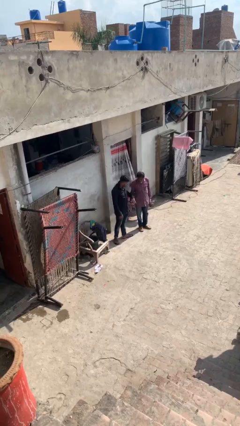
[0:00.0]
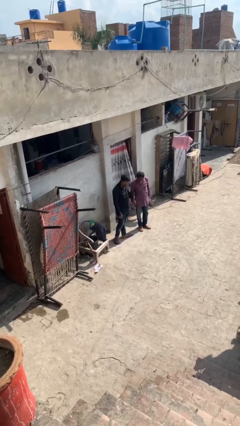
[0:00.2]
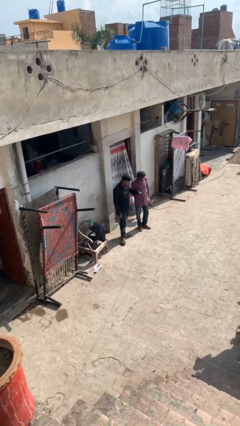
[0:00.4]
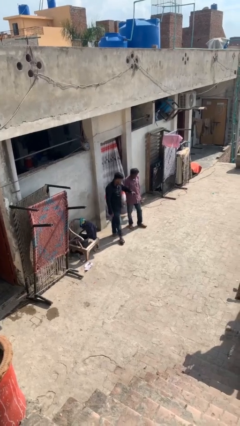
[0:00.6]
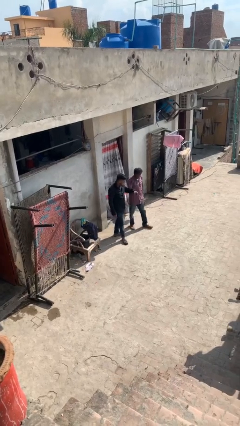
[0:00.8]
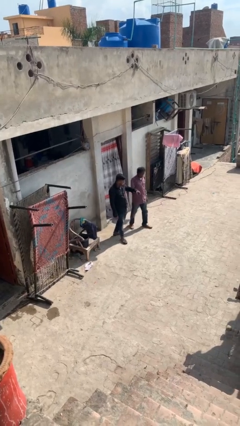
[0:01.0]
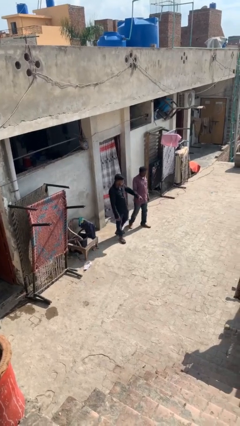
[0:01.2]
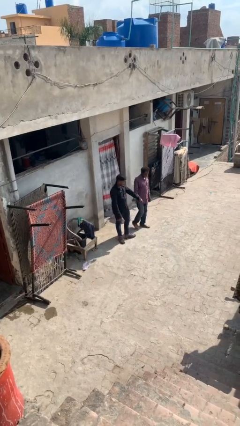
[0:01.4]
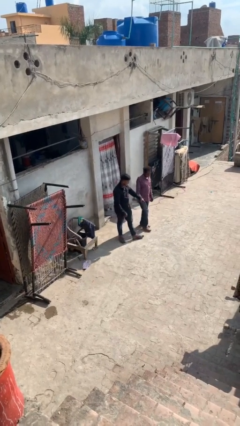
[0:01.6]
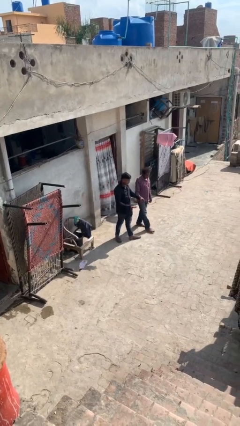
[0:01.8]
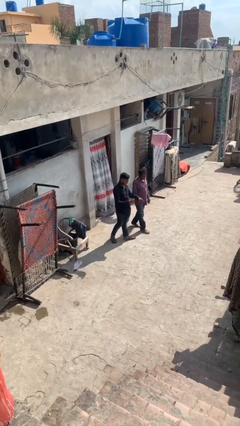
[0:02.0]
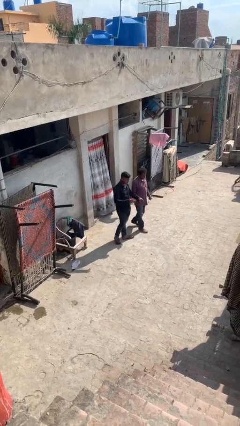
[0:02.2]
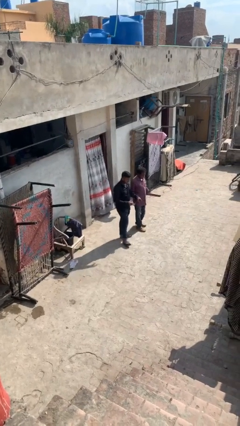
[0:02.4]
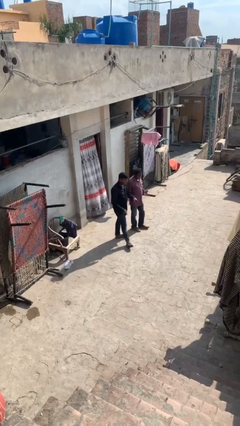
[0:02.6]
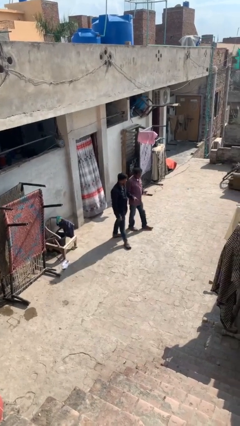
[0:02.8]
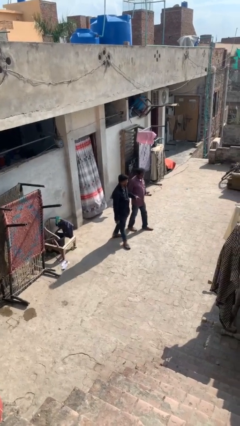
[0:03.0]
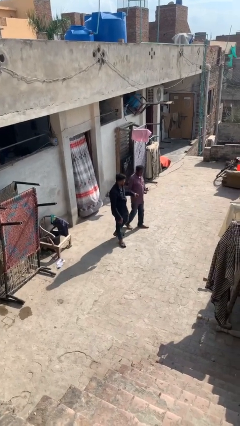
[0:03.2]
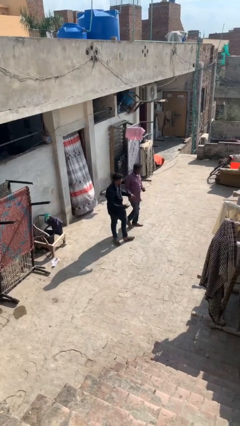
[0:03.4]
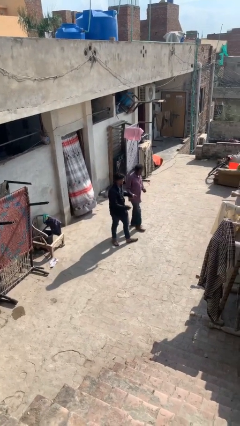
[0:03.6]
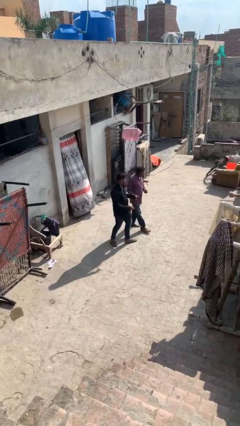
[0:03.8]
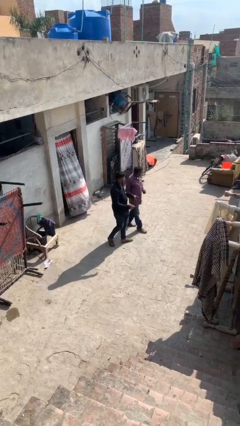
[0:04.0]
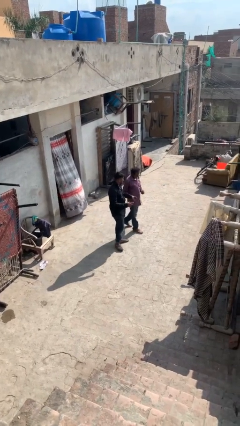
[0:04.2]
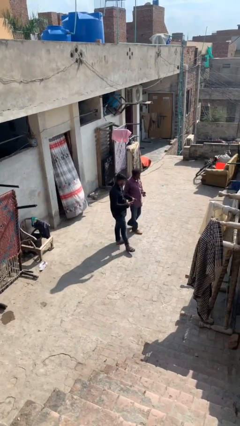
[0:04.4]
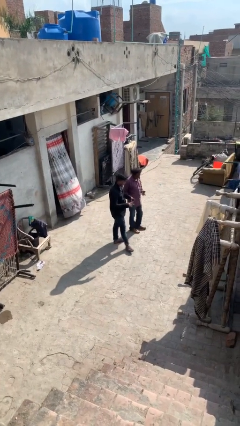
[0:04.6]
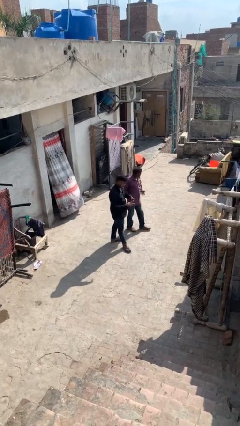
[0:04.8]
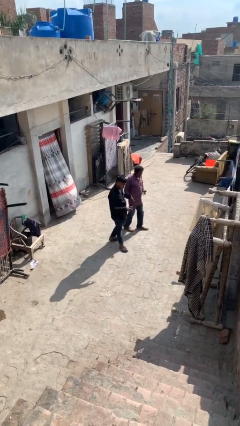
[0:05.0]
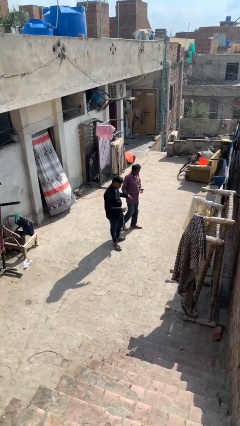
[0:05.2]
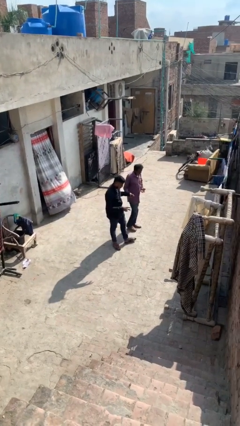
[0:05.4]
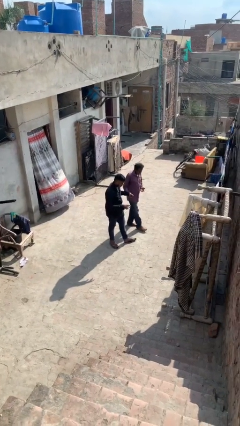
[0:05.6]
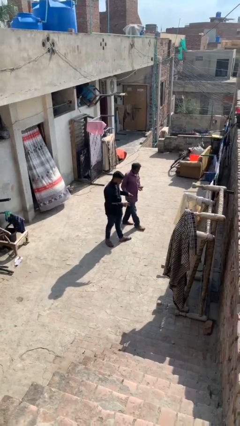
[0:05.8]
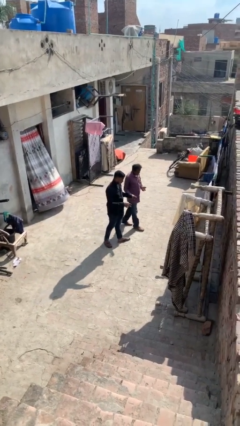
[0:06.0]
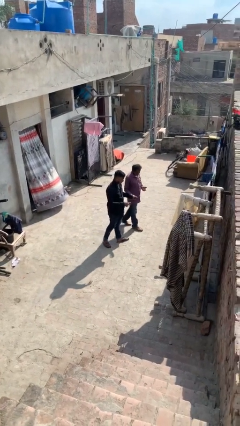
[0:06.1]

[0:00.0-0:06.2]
person holds hand

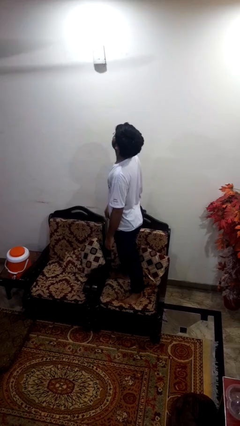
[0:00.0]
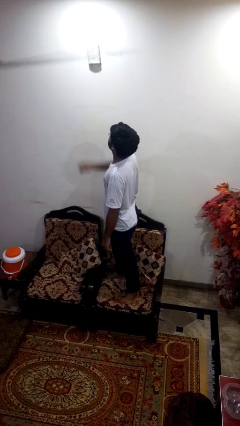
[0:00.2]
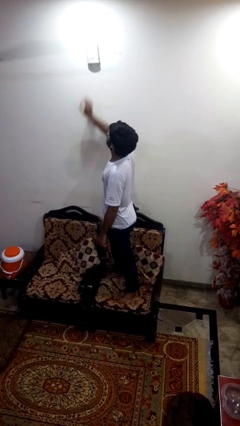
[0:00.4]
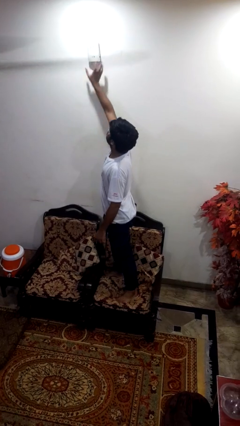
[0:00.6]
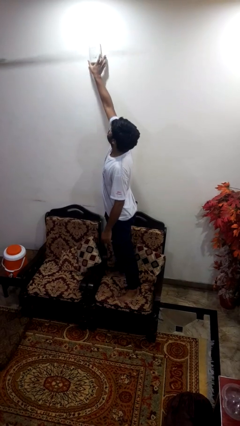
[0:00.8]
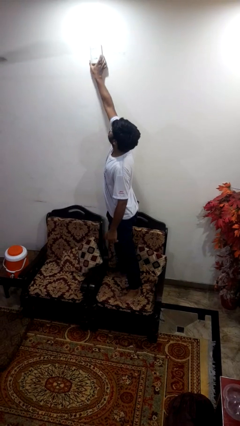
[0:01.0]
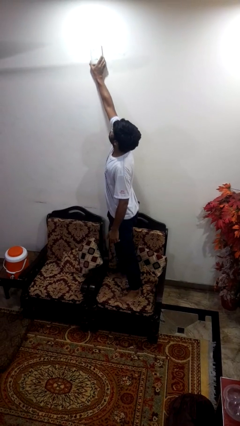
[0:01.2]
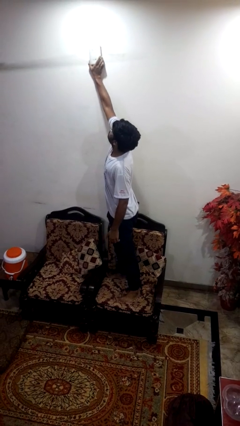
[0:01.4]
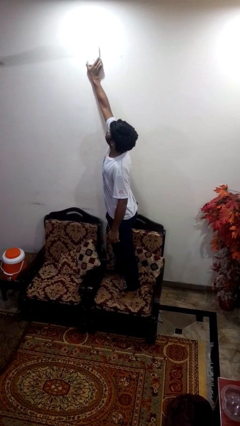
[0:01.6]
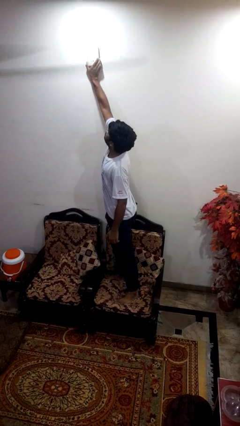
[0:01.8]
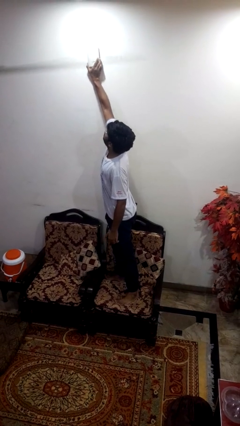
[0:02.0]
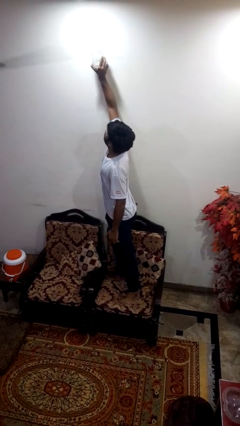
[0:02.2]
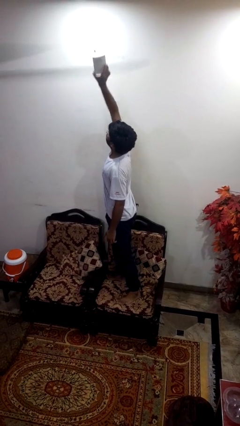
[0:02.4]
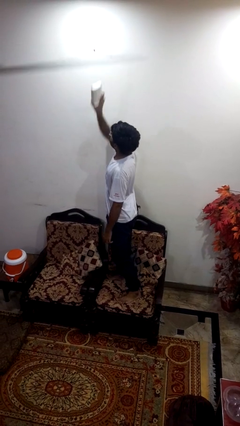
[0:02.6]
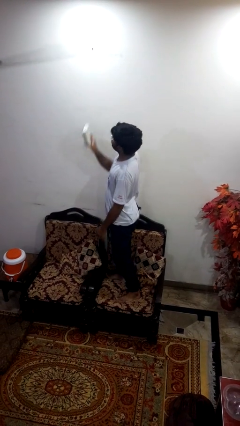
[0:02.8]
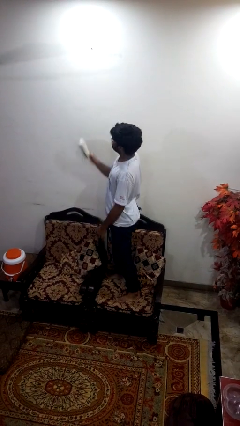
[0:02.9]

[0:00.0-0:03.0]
person takes down smoke detector

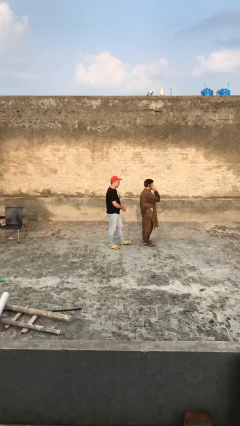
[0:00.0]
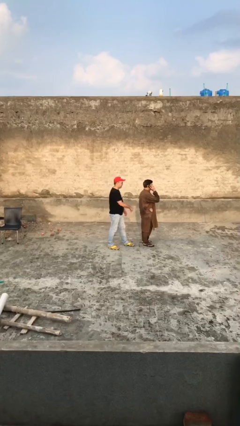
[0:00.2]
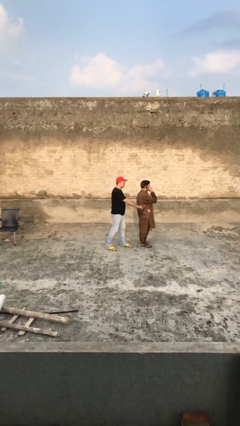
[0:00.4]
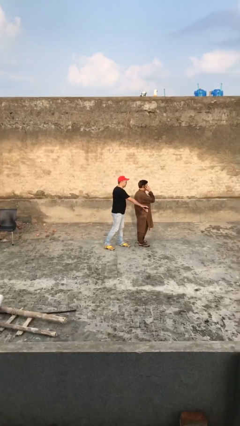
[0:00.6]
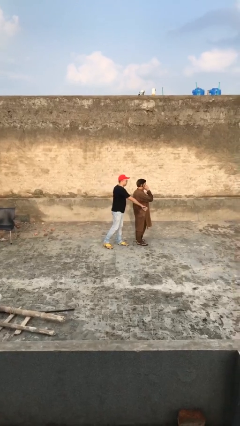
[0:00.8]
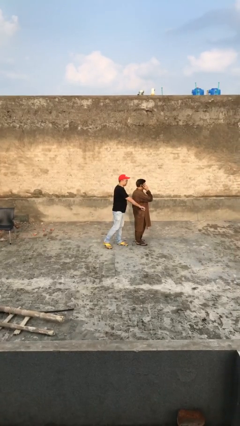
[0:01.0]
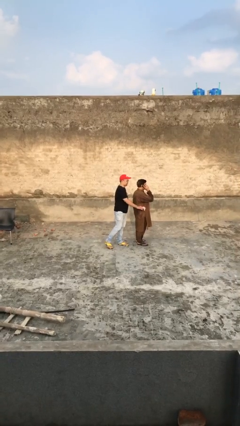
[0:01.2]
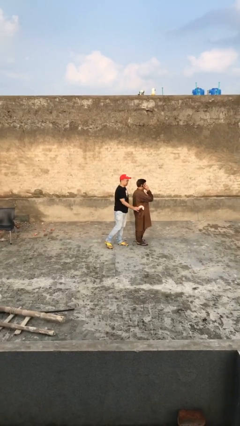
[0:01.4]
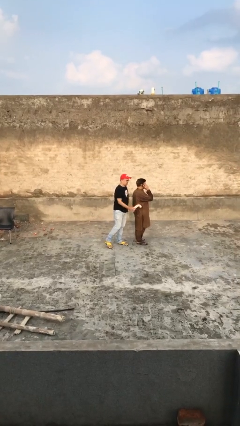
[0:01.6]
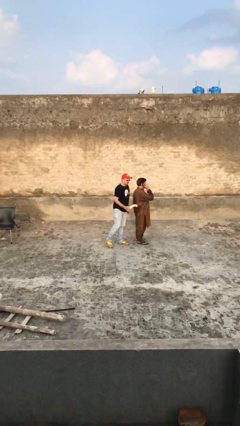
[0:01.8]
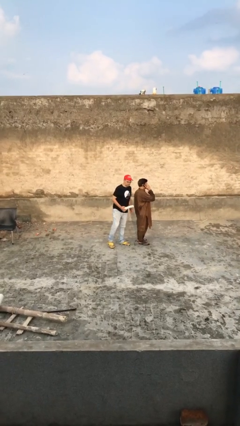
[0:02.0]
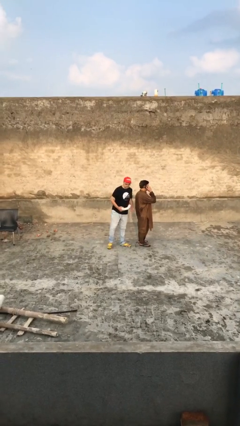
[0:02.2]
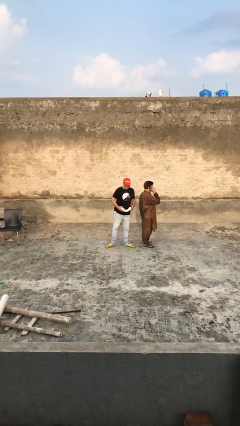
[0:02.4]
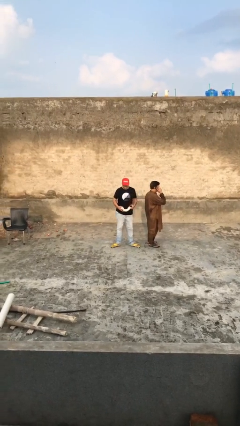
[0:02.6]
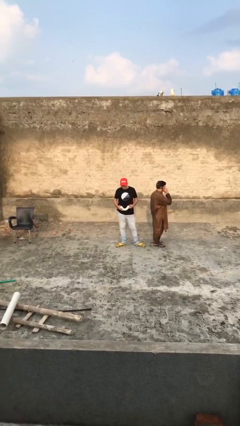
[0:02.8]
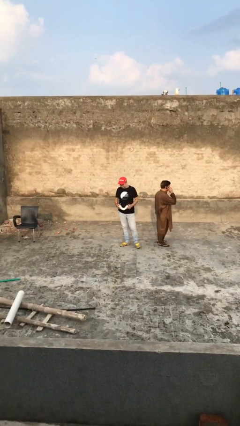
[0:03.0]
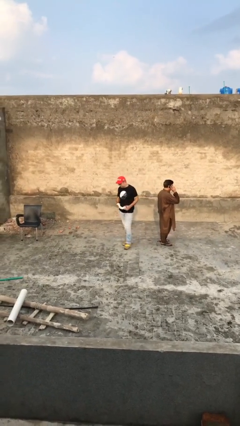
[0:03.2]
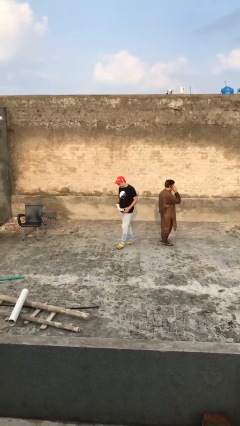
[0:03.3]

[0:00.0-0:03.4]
person steals object from person

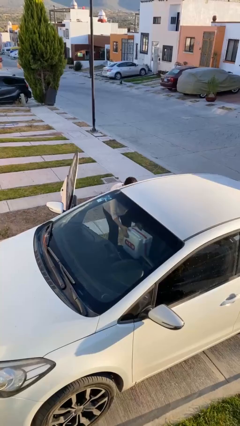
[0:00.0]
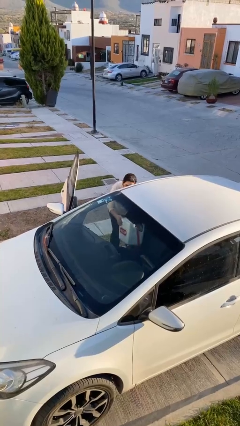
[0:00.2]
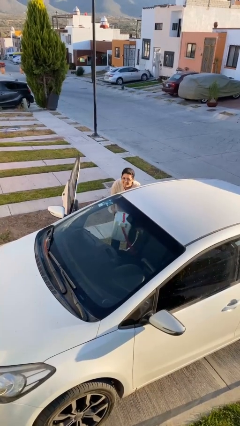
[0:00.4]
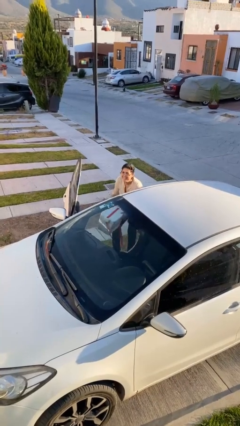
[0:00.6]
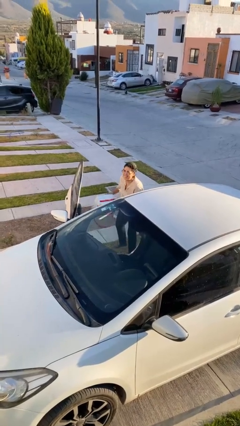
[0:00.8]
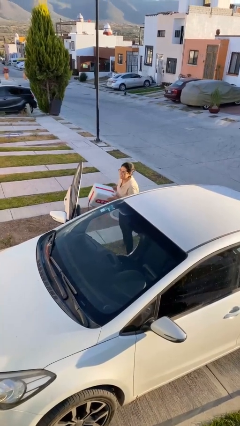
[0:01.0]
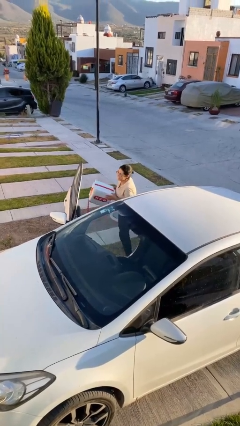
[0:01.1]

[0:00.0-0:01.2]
person unloads car

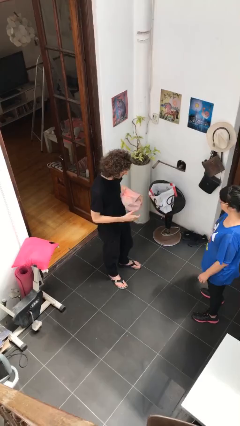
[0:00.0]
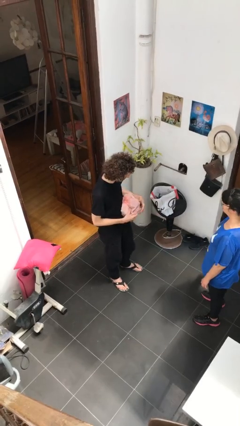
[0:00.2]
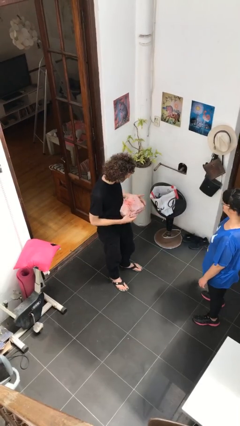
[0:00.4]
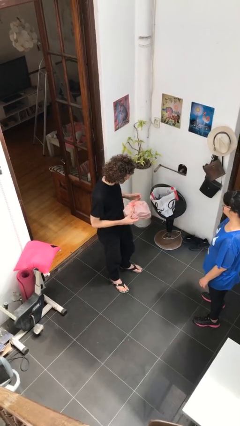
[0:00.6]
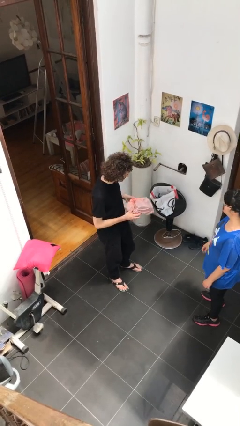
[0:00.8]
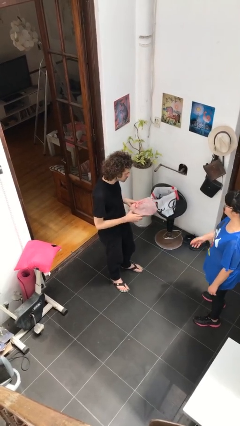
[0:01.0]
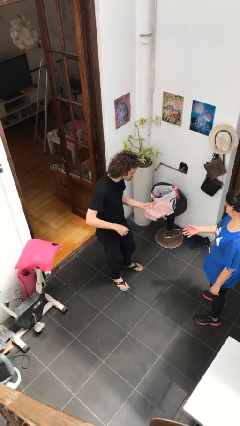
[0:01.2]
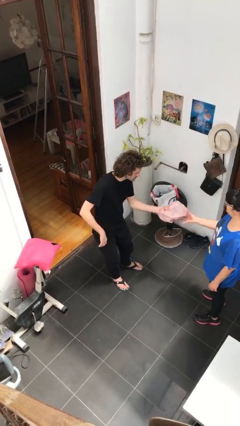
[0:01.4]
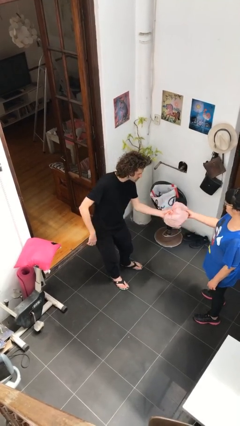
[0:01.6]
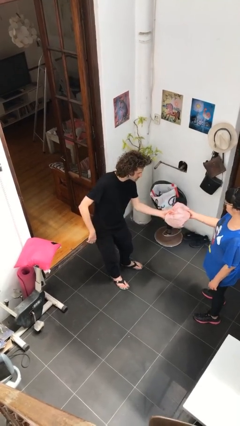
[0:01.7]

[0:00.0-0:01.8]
person transfers object to person

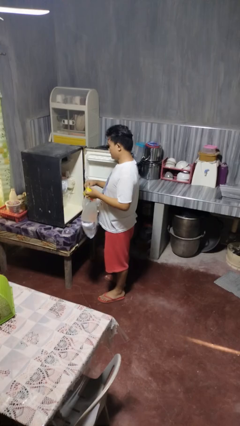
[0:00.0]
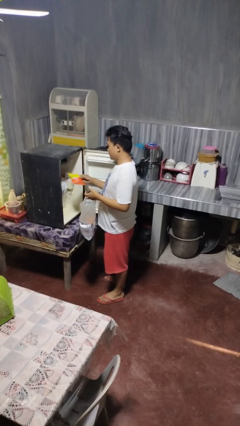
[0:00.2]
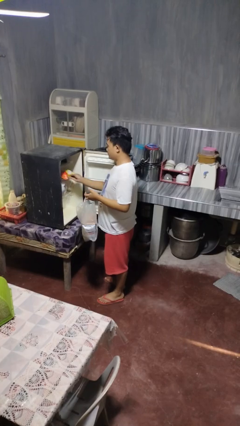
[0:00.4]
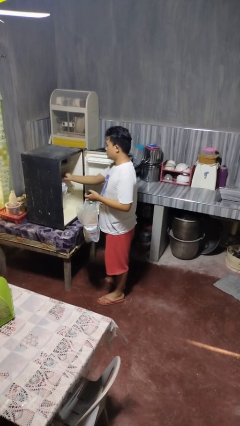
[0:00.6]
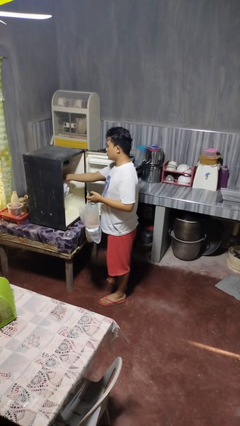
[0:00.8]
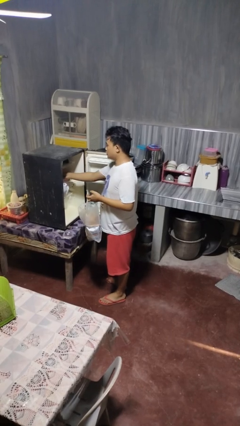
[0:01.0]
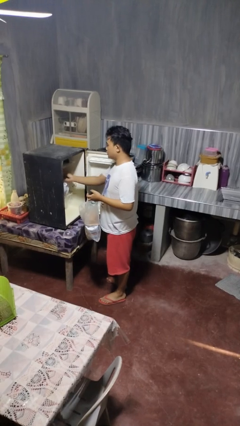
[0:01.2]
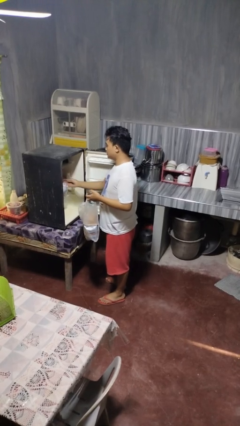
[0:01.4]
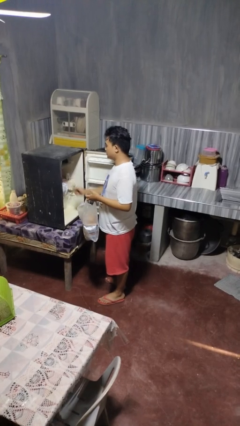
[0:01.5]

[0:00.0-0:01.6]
person loads groceries into refrigerator
